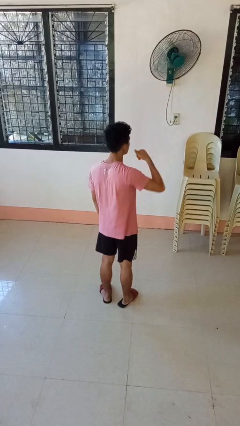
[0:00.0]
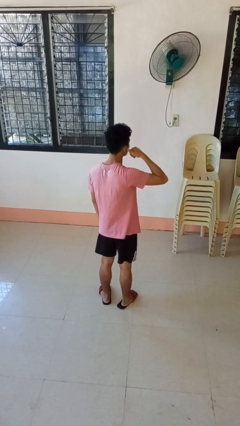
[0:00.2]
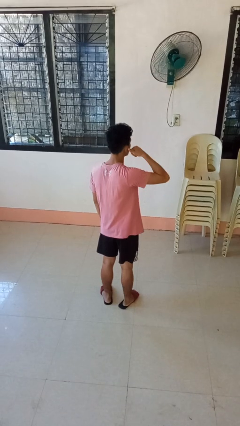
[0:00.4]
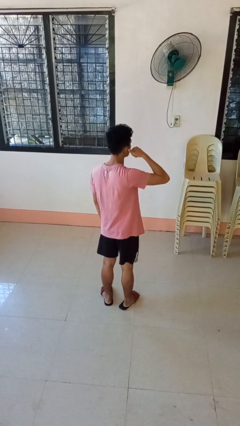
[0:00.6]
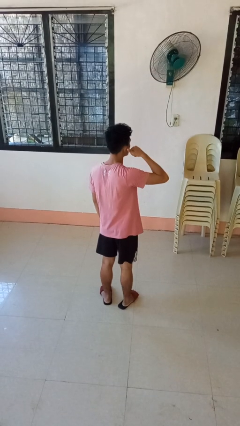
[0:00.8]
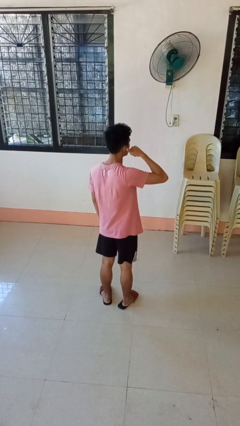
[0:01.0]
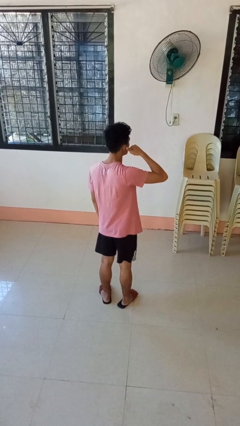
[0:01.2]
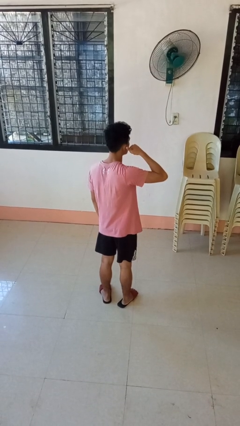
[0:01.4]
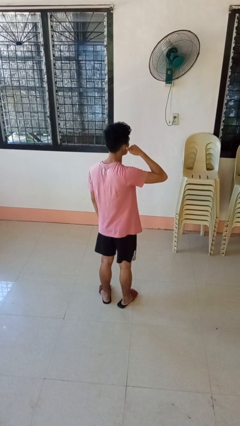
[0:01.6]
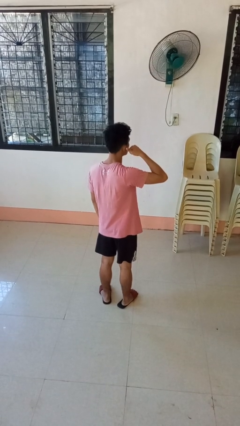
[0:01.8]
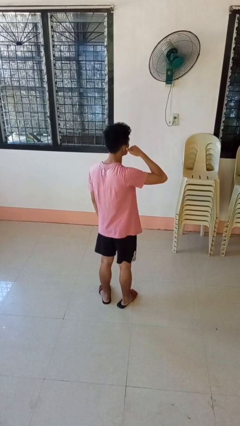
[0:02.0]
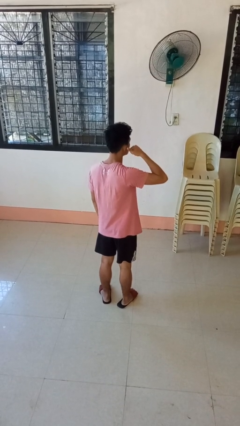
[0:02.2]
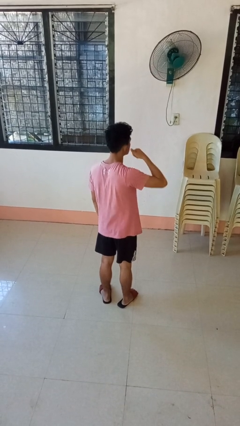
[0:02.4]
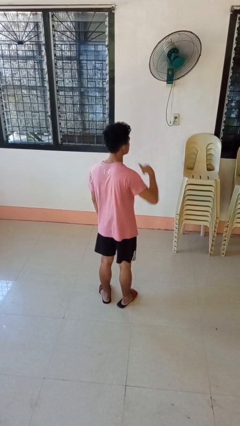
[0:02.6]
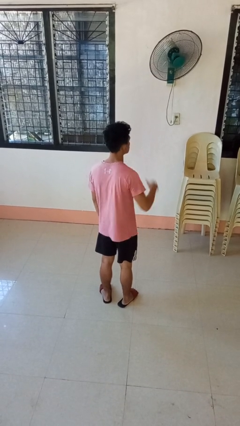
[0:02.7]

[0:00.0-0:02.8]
person gestures call me

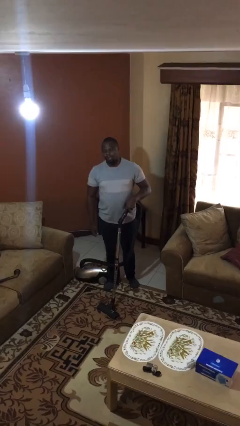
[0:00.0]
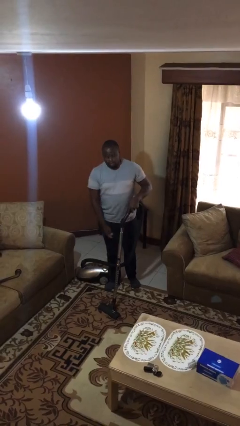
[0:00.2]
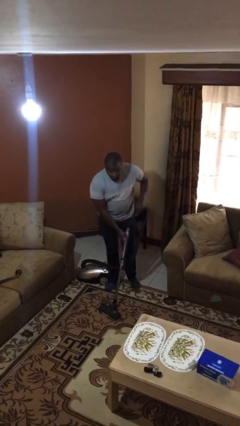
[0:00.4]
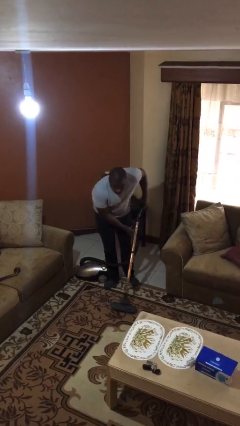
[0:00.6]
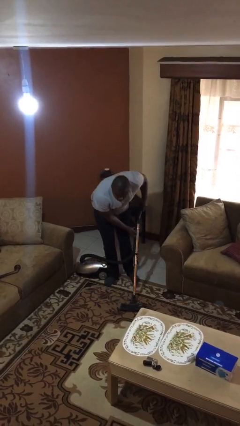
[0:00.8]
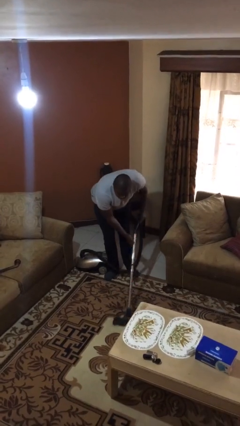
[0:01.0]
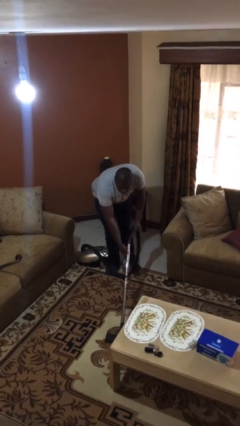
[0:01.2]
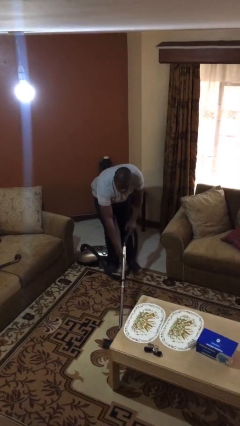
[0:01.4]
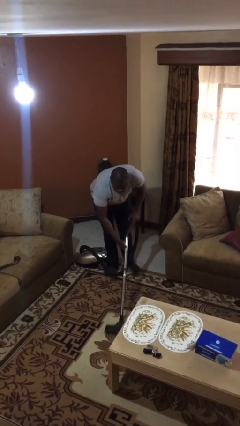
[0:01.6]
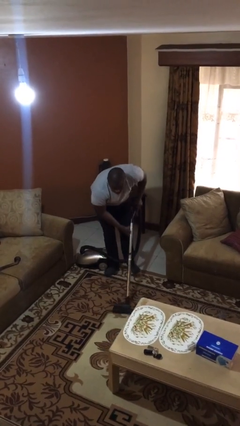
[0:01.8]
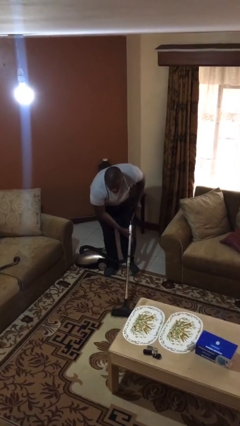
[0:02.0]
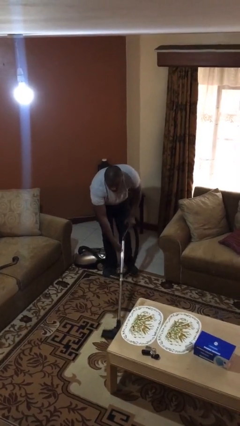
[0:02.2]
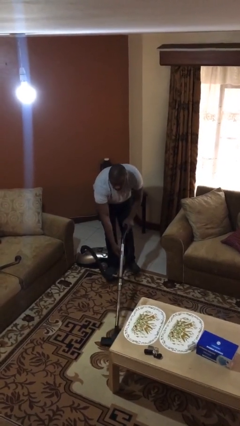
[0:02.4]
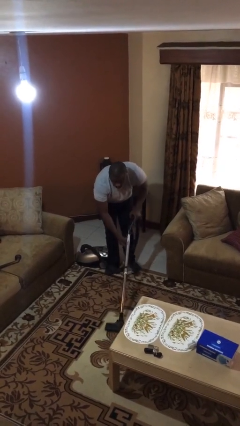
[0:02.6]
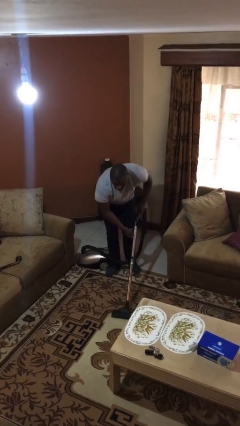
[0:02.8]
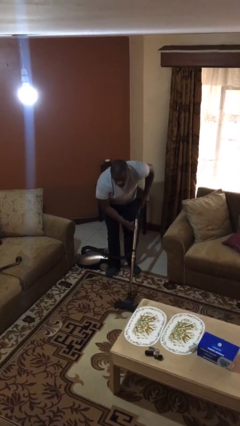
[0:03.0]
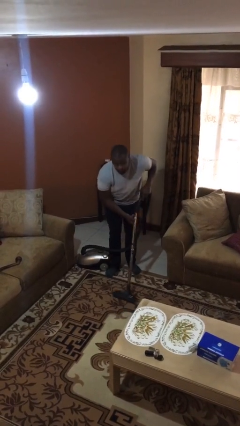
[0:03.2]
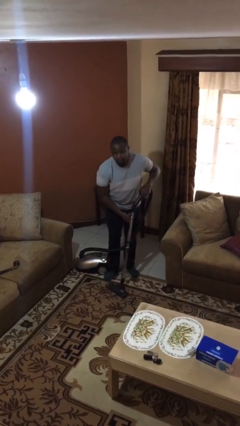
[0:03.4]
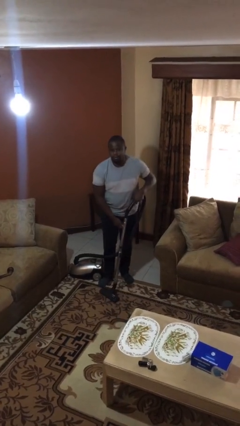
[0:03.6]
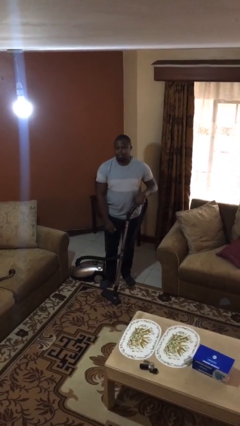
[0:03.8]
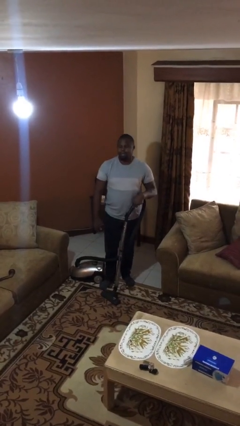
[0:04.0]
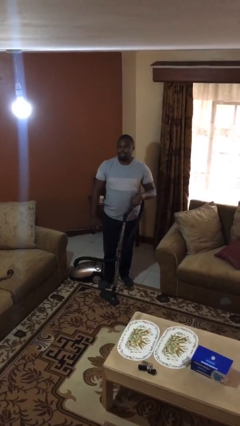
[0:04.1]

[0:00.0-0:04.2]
person vacuums carpet

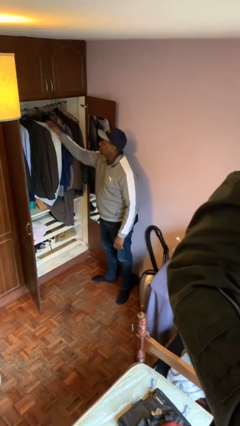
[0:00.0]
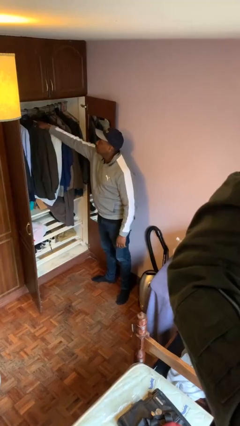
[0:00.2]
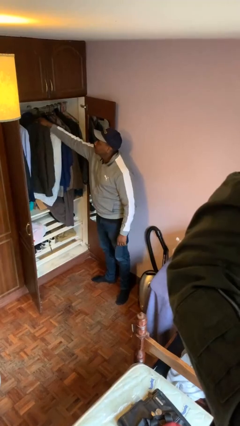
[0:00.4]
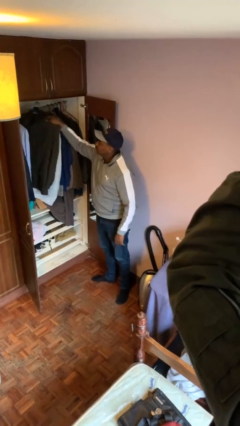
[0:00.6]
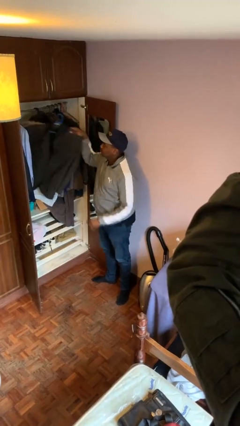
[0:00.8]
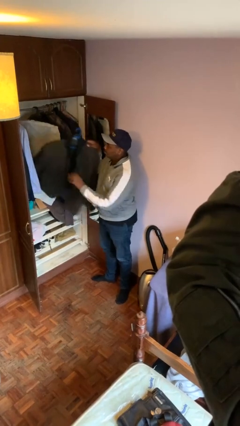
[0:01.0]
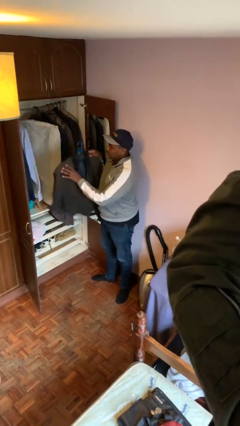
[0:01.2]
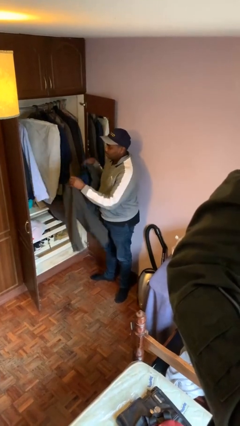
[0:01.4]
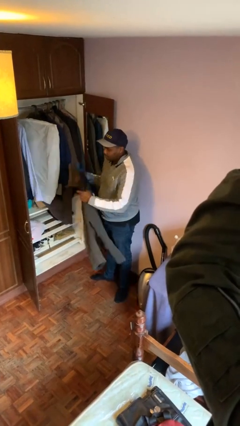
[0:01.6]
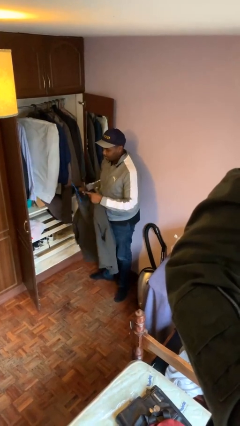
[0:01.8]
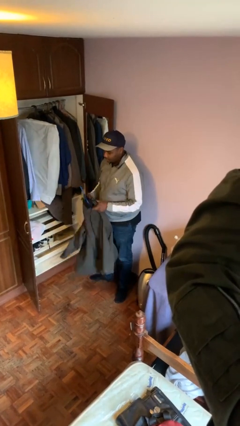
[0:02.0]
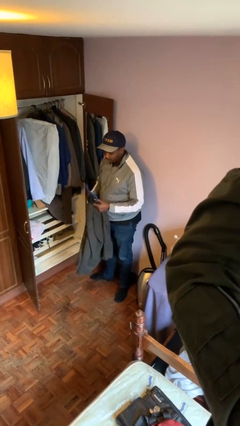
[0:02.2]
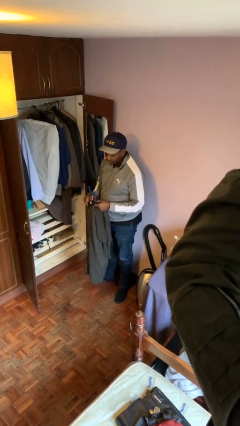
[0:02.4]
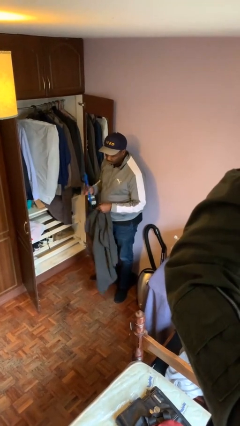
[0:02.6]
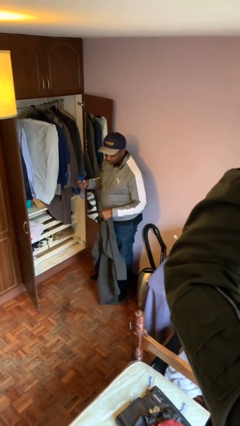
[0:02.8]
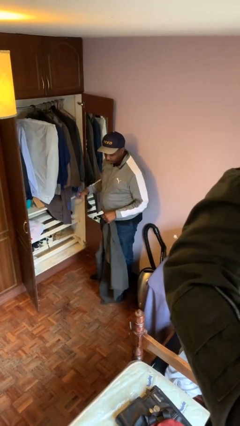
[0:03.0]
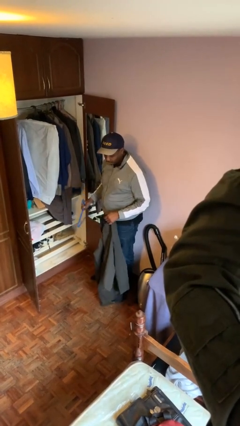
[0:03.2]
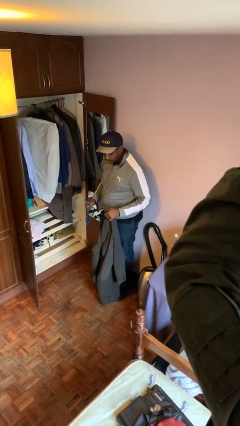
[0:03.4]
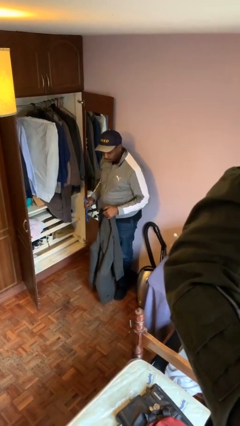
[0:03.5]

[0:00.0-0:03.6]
person takes clothes from closet

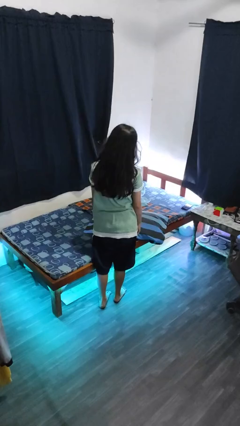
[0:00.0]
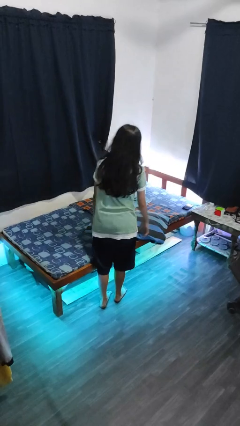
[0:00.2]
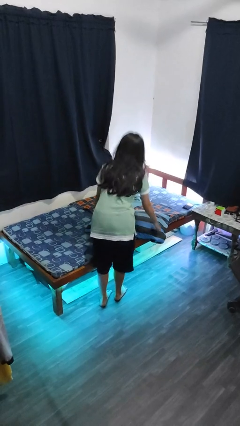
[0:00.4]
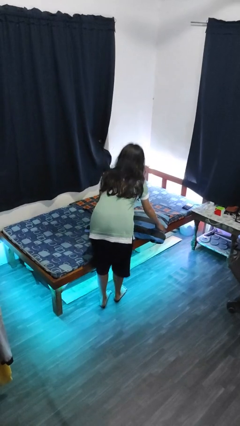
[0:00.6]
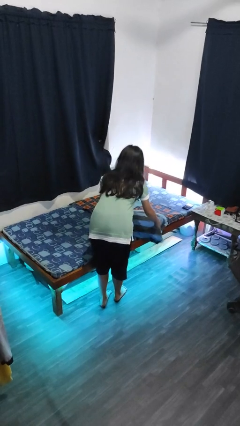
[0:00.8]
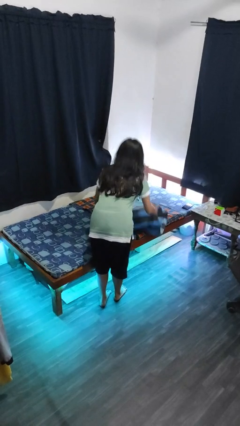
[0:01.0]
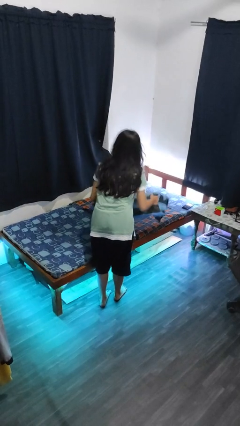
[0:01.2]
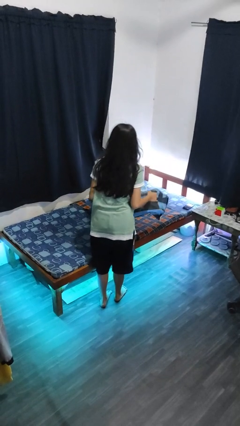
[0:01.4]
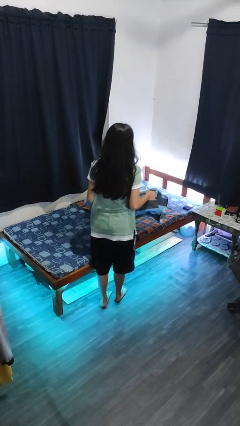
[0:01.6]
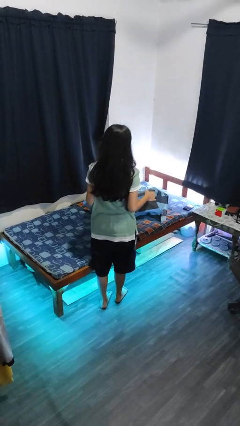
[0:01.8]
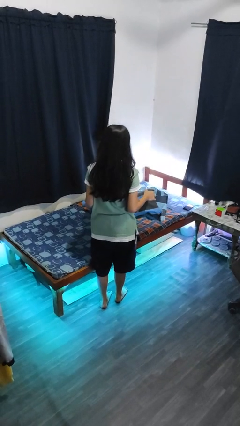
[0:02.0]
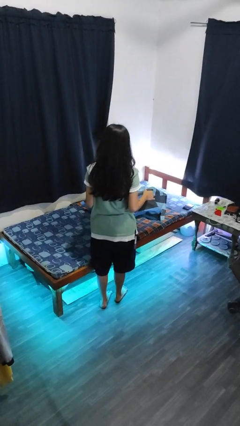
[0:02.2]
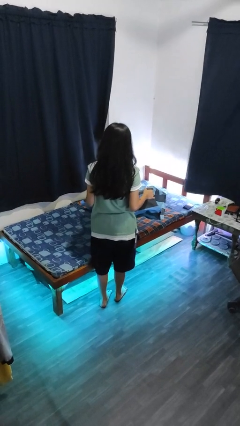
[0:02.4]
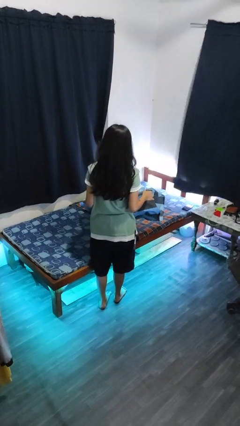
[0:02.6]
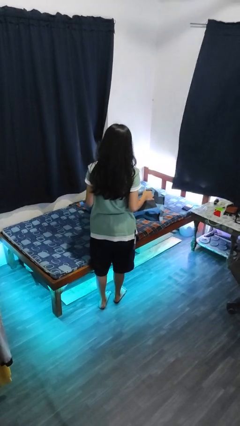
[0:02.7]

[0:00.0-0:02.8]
person picks up object from bed

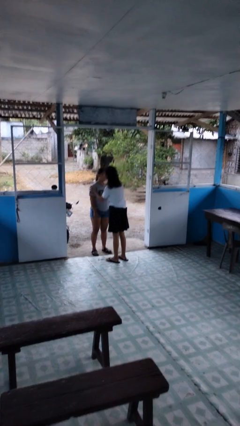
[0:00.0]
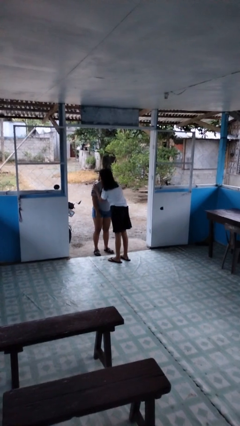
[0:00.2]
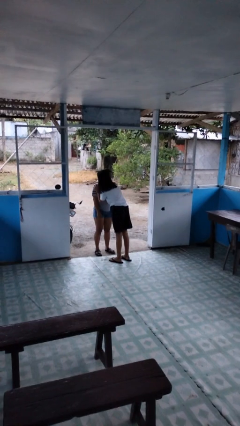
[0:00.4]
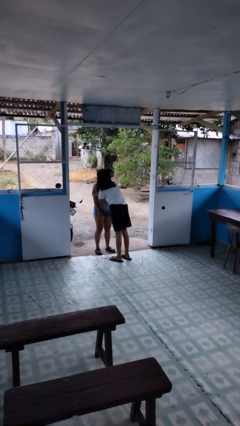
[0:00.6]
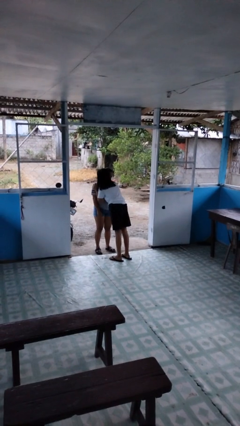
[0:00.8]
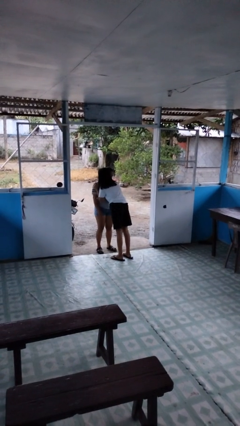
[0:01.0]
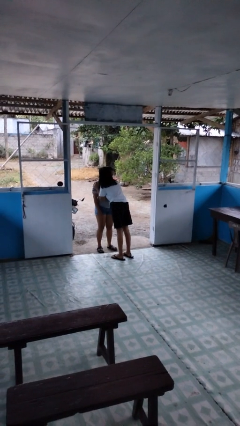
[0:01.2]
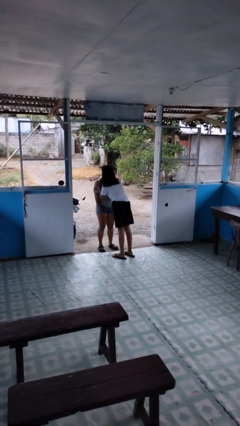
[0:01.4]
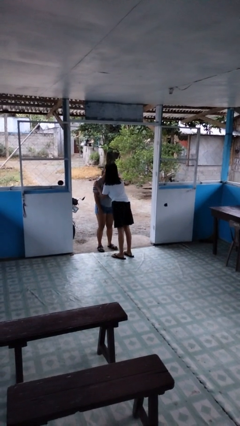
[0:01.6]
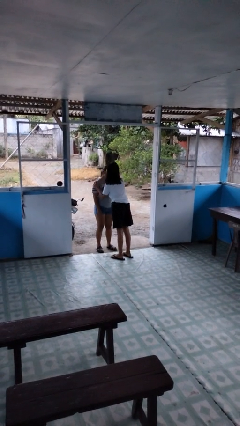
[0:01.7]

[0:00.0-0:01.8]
person kisses cheek of person

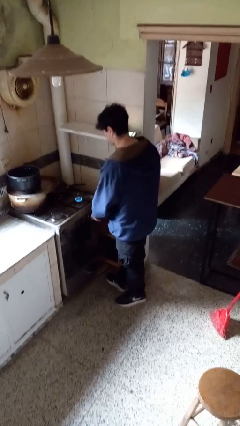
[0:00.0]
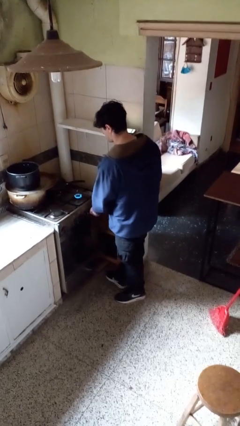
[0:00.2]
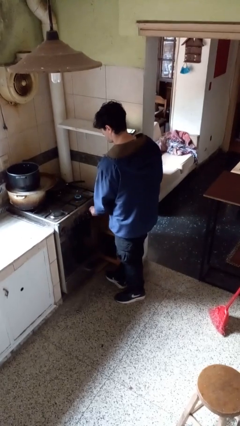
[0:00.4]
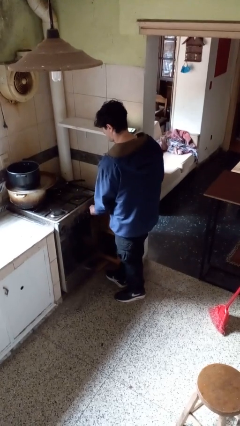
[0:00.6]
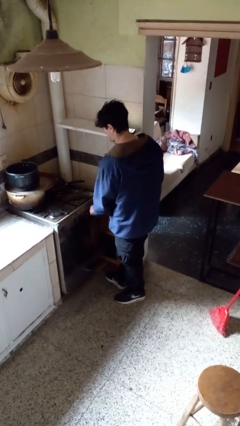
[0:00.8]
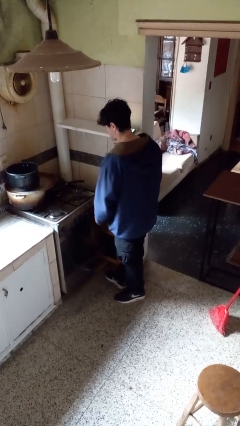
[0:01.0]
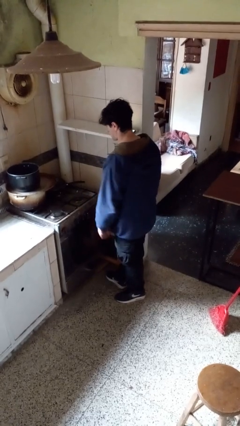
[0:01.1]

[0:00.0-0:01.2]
person turns off stovetop

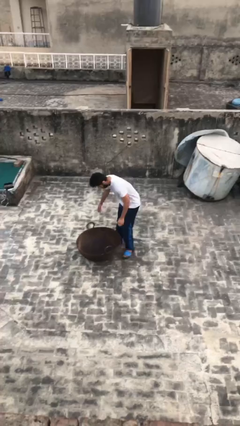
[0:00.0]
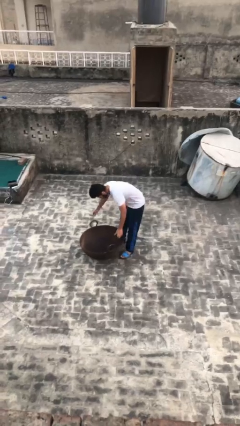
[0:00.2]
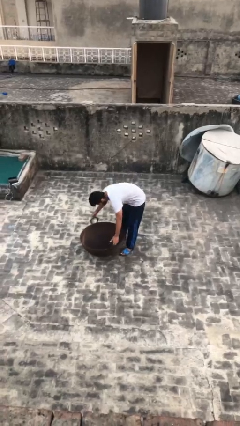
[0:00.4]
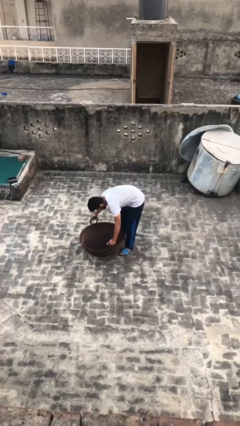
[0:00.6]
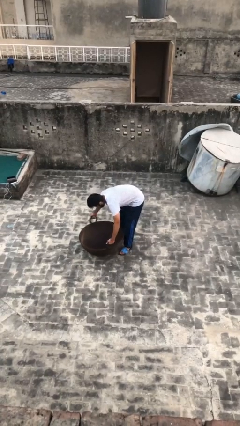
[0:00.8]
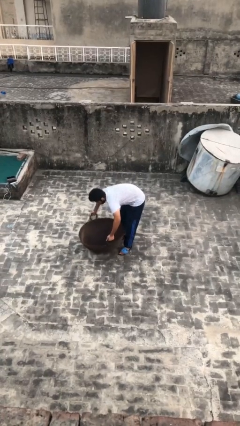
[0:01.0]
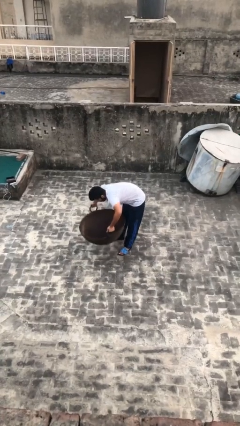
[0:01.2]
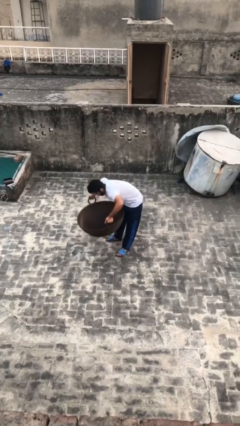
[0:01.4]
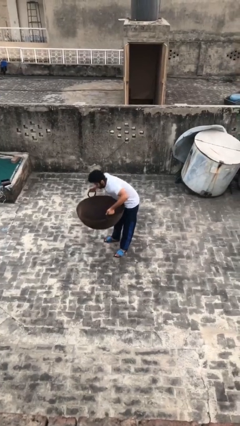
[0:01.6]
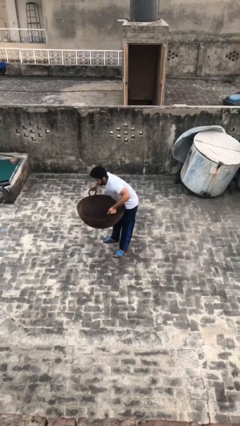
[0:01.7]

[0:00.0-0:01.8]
person picks up object from floor
